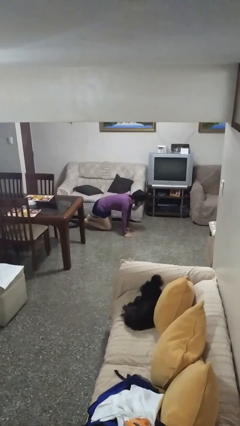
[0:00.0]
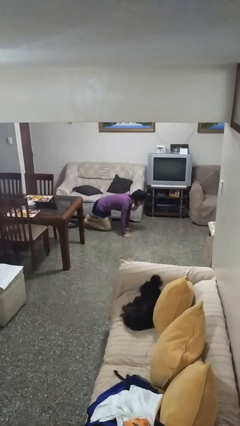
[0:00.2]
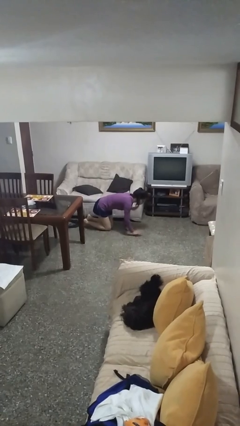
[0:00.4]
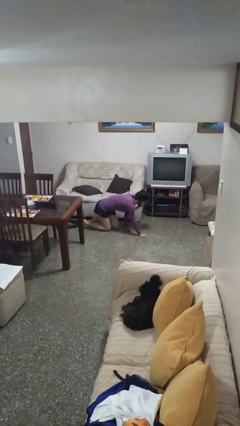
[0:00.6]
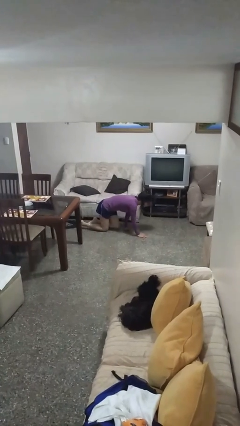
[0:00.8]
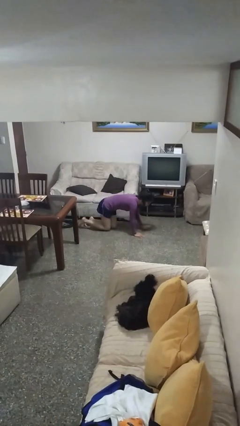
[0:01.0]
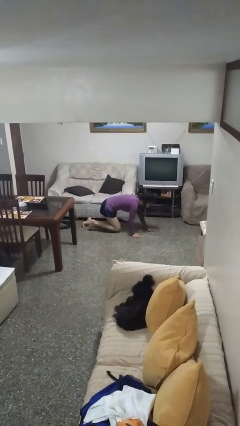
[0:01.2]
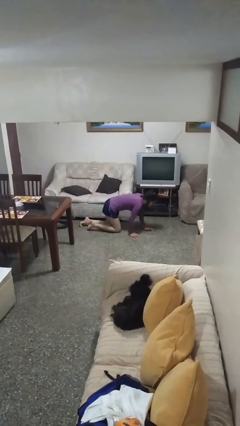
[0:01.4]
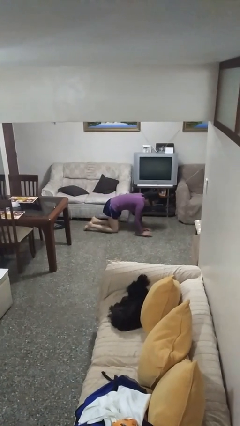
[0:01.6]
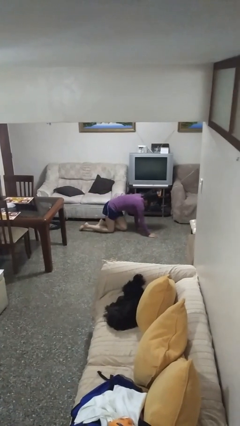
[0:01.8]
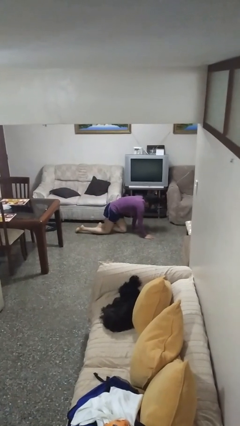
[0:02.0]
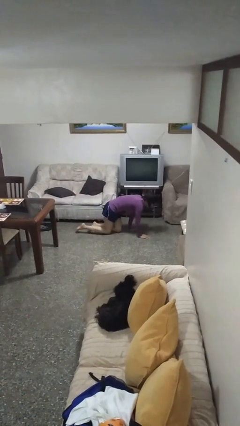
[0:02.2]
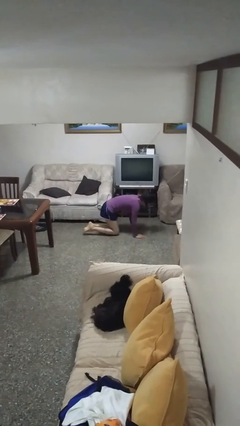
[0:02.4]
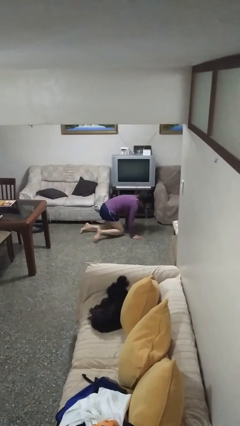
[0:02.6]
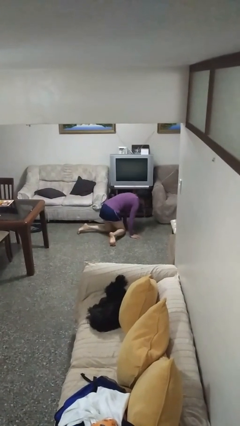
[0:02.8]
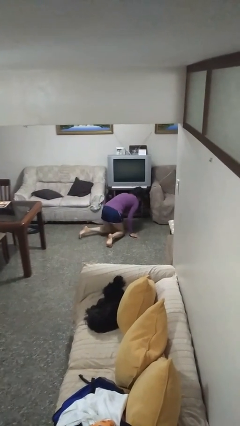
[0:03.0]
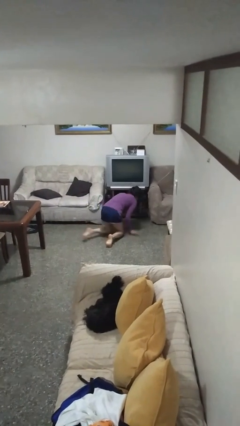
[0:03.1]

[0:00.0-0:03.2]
person crawls

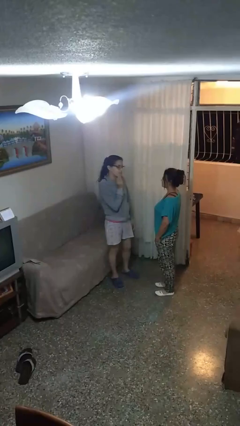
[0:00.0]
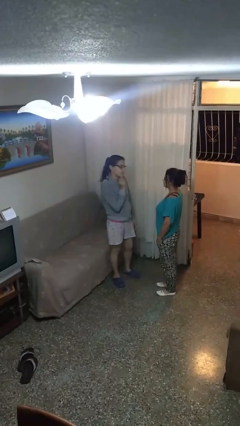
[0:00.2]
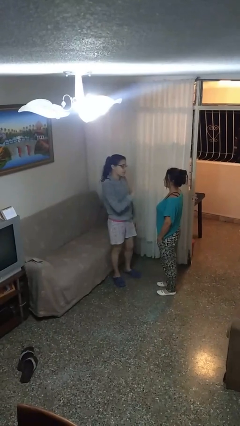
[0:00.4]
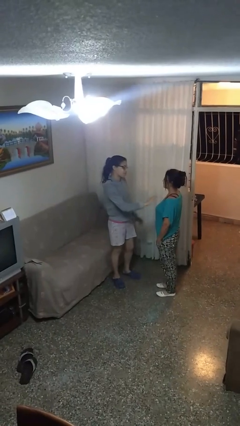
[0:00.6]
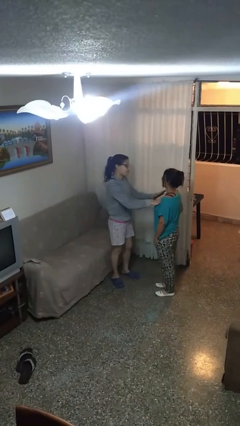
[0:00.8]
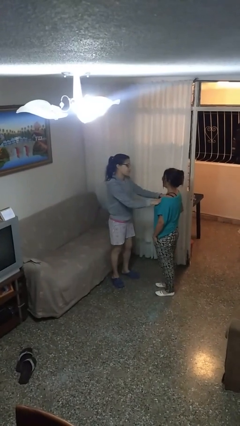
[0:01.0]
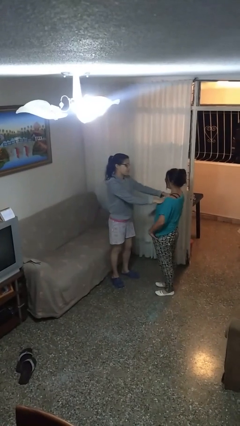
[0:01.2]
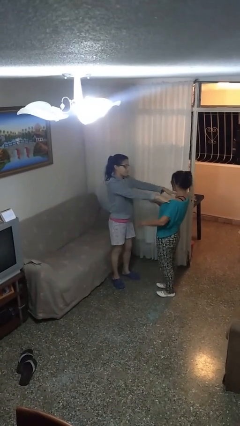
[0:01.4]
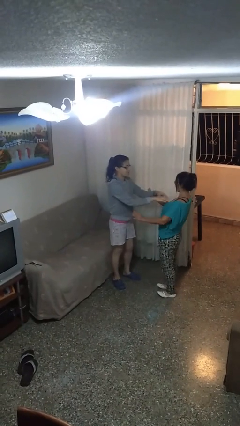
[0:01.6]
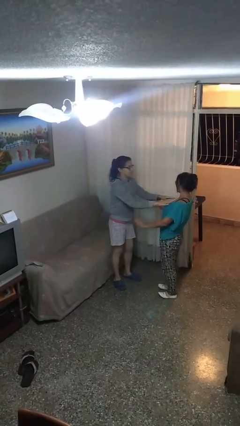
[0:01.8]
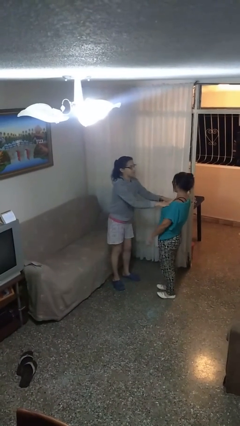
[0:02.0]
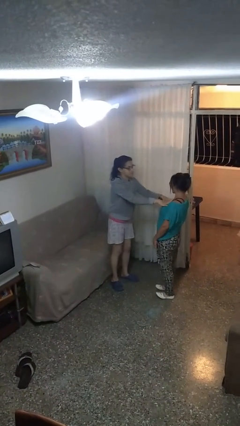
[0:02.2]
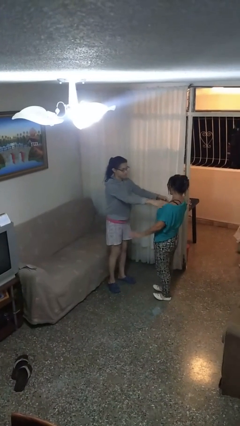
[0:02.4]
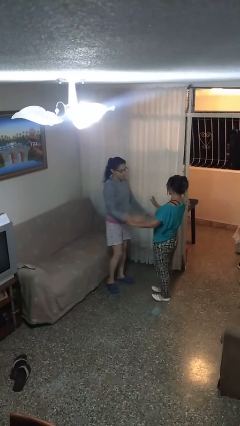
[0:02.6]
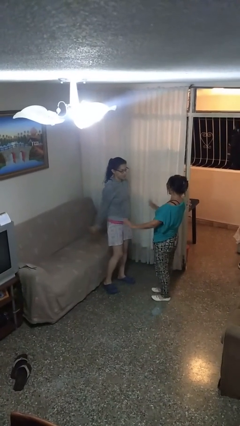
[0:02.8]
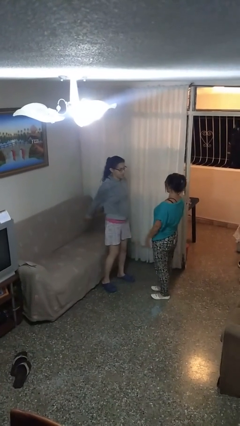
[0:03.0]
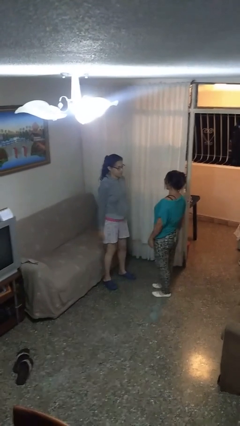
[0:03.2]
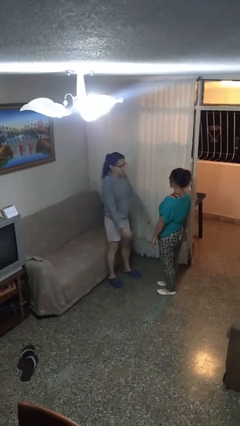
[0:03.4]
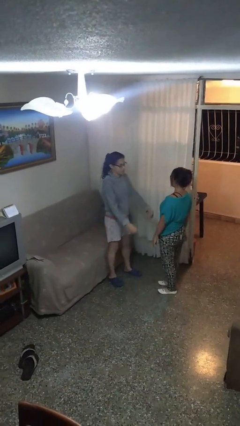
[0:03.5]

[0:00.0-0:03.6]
person shoves person

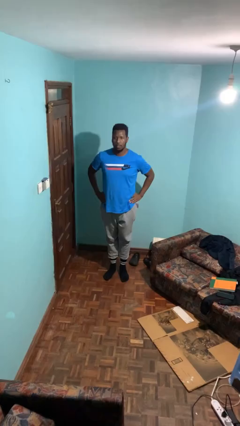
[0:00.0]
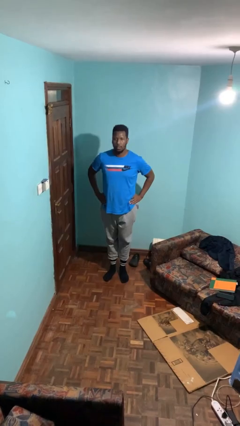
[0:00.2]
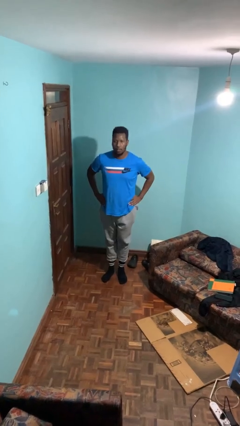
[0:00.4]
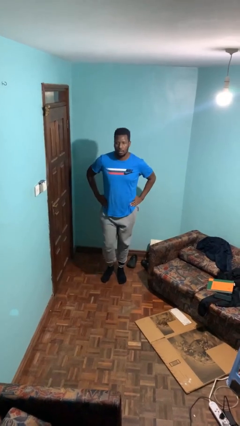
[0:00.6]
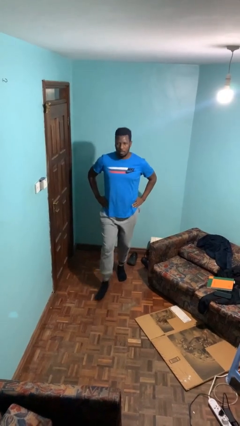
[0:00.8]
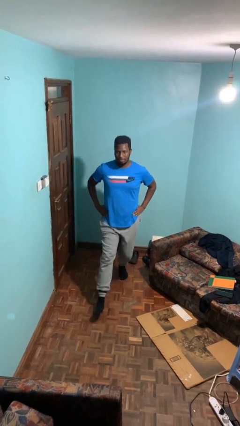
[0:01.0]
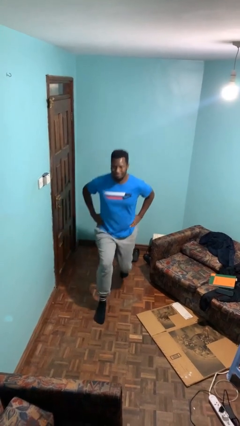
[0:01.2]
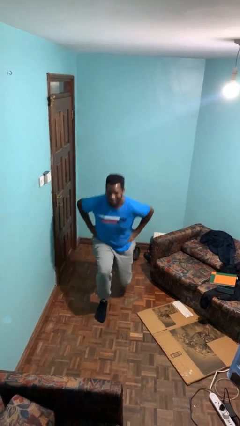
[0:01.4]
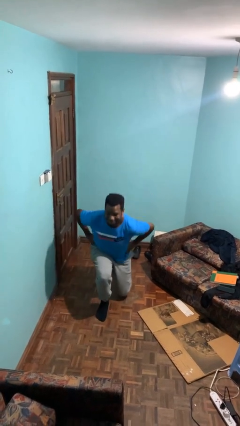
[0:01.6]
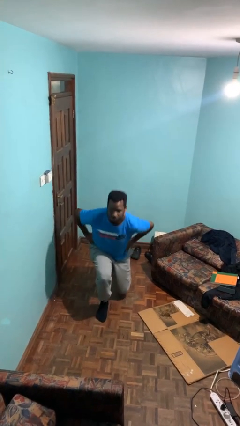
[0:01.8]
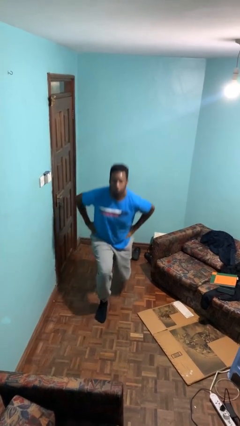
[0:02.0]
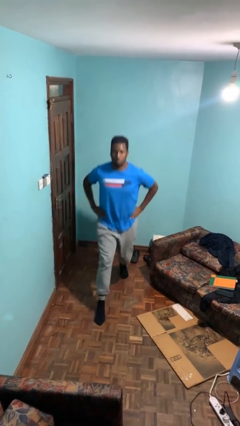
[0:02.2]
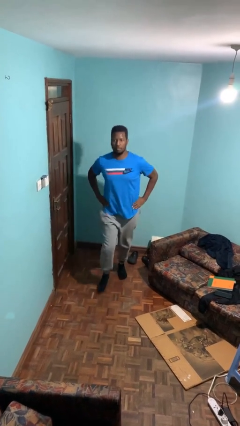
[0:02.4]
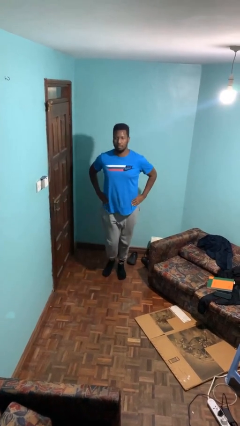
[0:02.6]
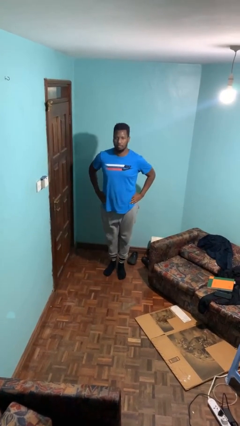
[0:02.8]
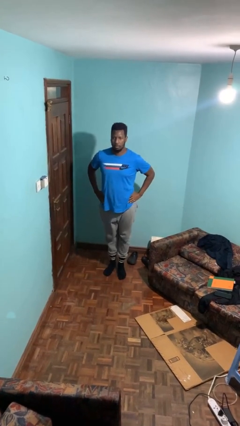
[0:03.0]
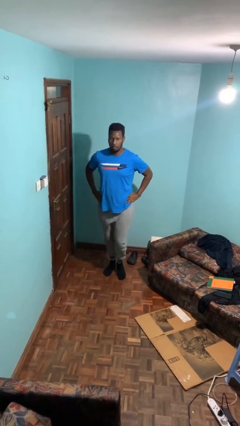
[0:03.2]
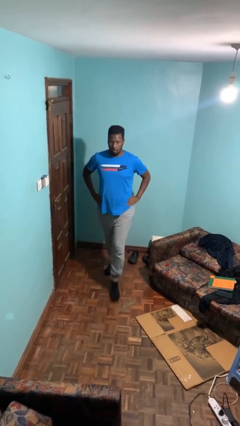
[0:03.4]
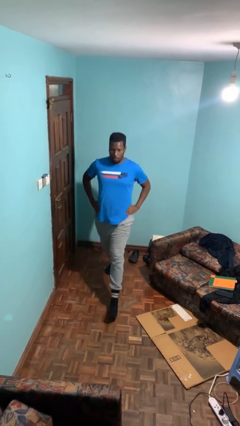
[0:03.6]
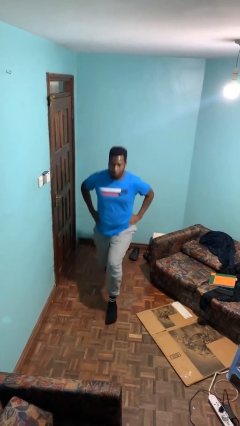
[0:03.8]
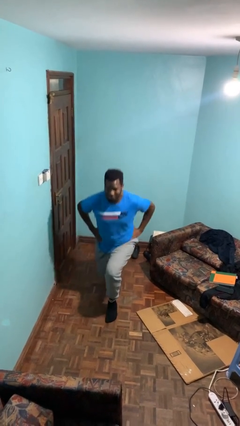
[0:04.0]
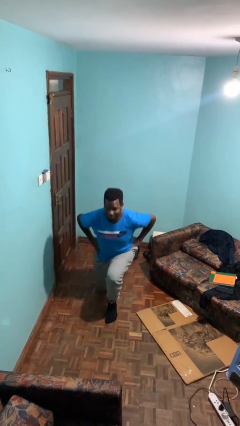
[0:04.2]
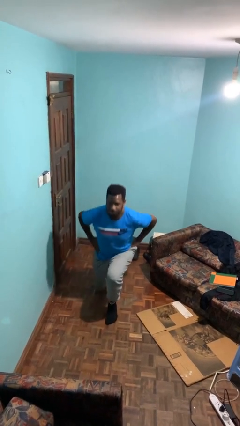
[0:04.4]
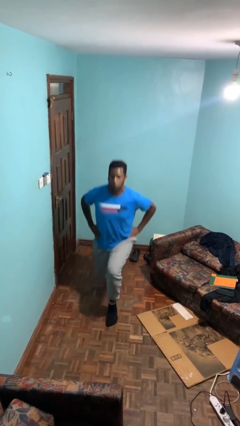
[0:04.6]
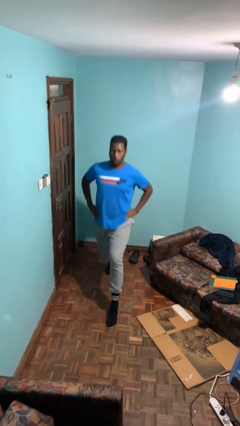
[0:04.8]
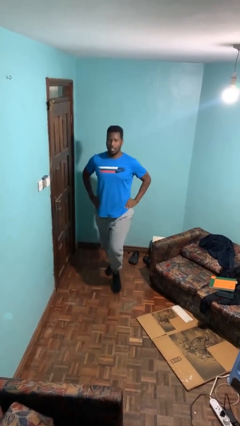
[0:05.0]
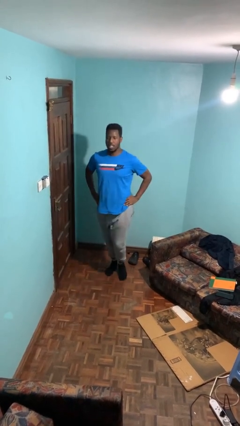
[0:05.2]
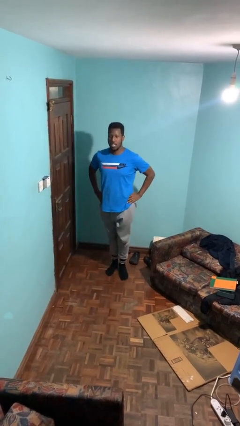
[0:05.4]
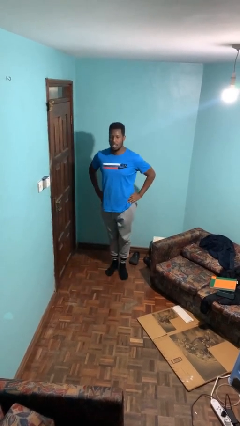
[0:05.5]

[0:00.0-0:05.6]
person exercises with lunges

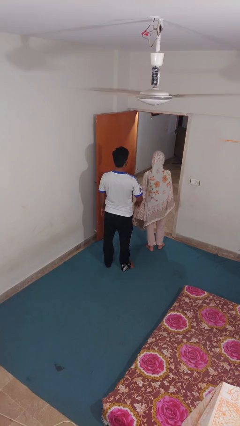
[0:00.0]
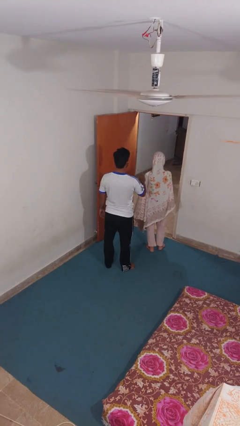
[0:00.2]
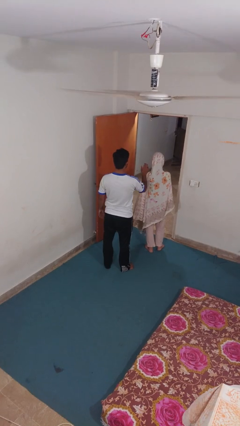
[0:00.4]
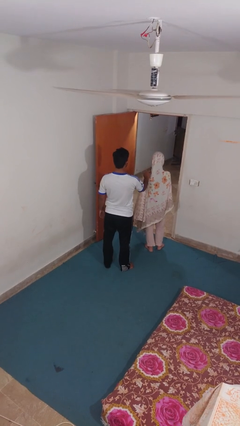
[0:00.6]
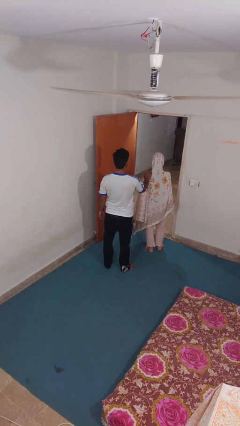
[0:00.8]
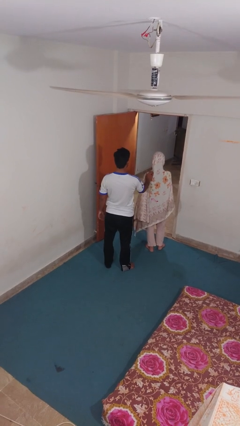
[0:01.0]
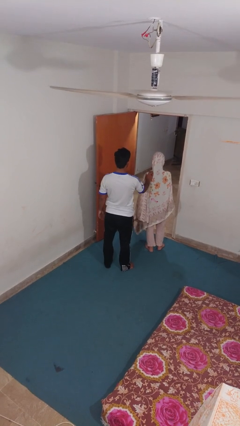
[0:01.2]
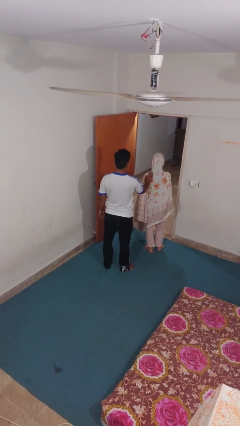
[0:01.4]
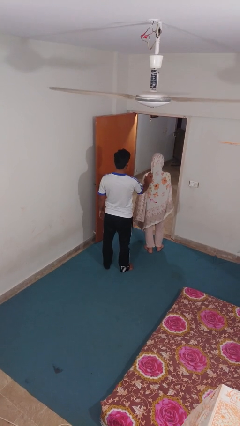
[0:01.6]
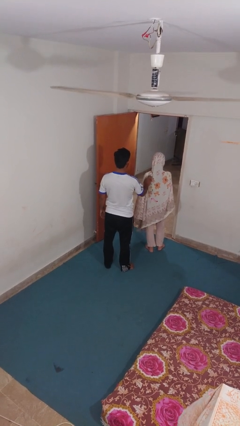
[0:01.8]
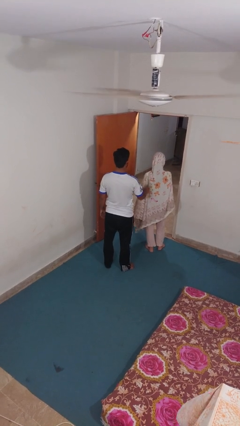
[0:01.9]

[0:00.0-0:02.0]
person touches back of person

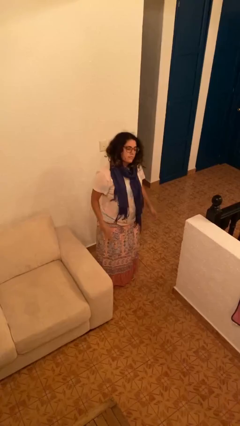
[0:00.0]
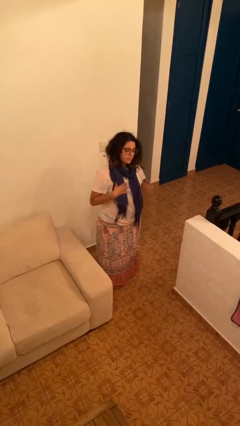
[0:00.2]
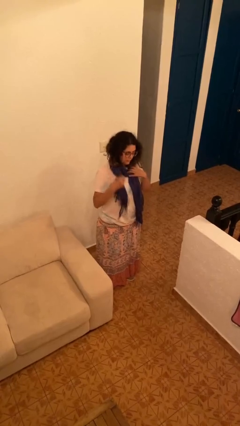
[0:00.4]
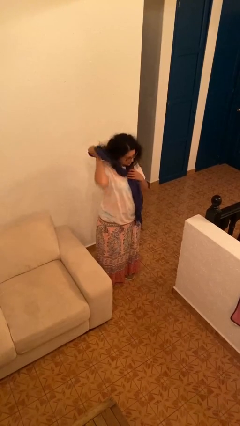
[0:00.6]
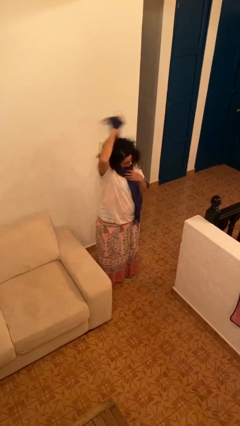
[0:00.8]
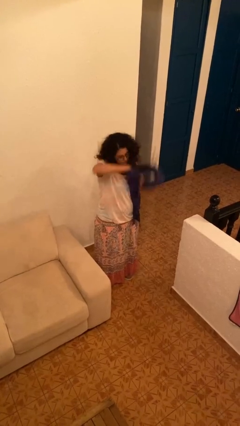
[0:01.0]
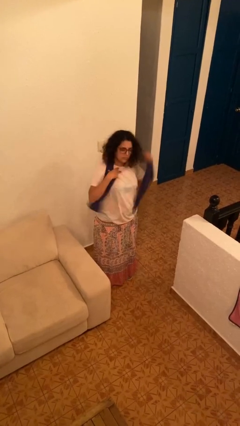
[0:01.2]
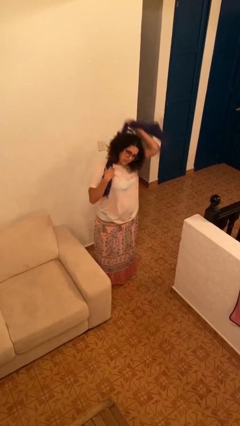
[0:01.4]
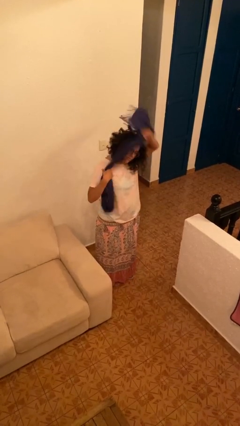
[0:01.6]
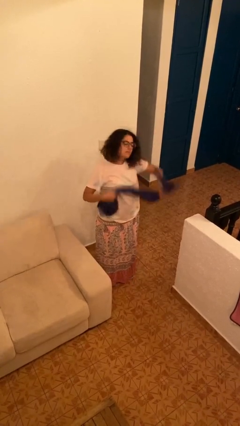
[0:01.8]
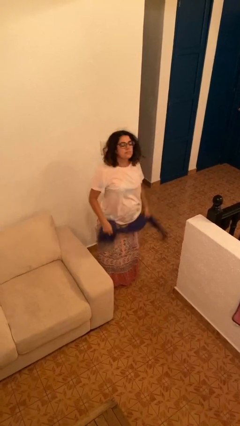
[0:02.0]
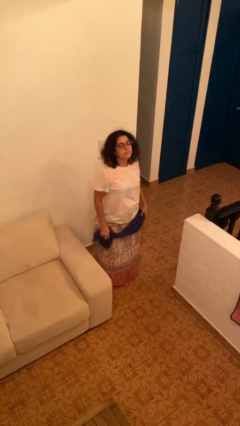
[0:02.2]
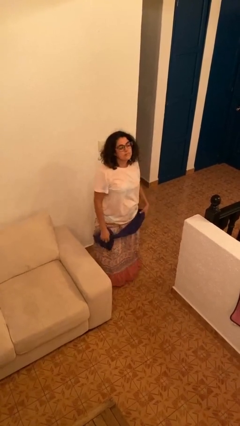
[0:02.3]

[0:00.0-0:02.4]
person takes off scarf

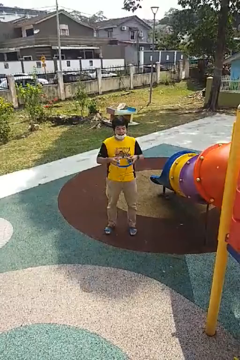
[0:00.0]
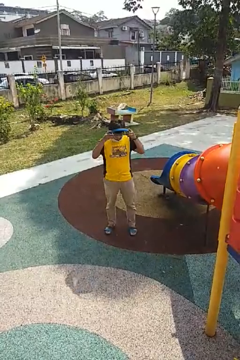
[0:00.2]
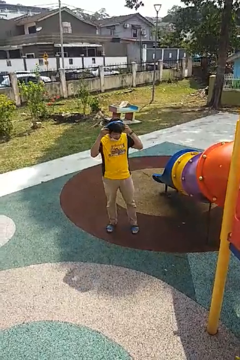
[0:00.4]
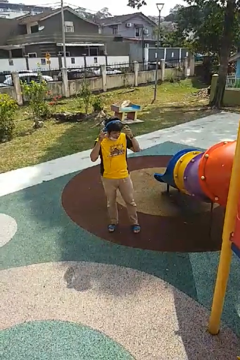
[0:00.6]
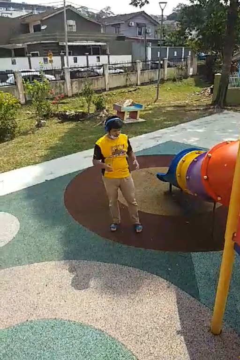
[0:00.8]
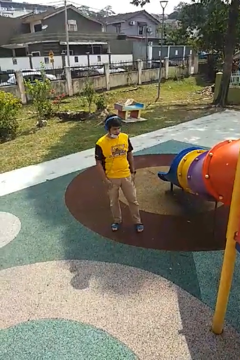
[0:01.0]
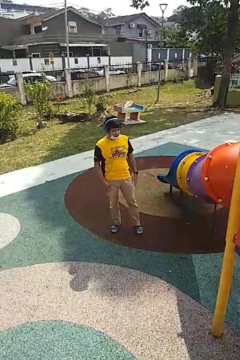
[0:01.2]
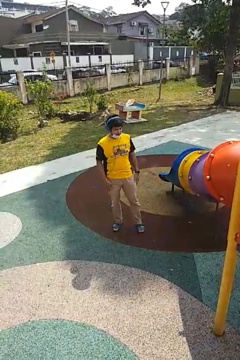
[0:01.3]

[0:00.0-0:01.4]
person puts on headphones
